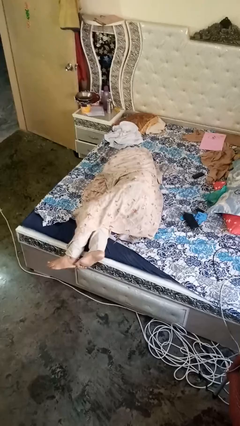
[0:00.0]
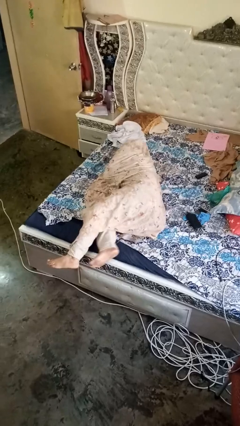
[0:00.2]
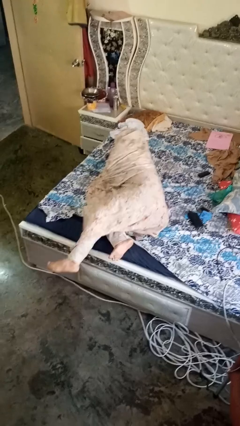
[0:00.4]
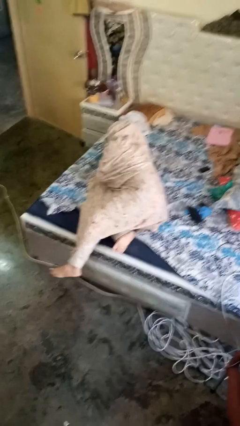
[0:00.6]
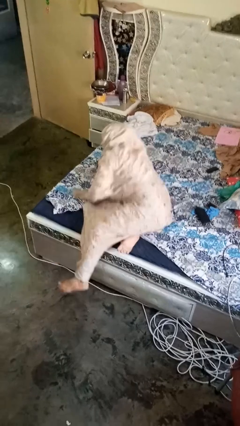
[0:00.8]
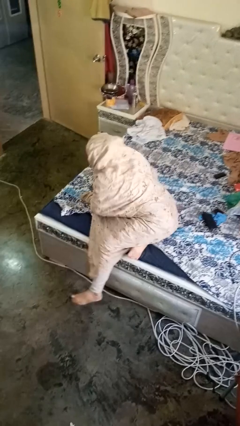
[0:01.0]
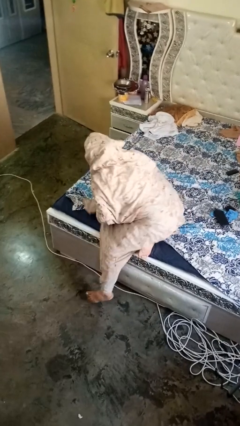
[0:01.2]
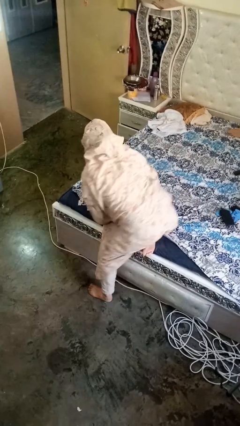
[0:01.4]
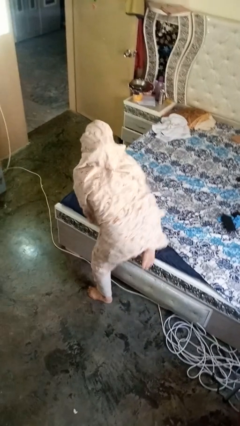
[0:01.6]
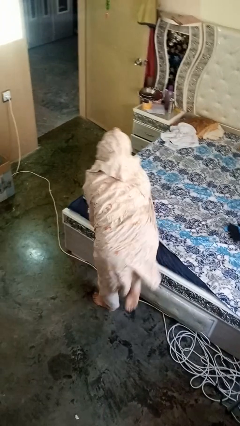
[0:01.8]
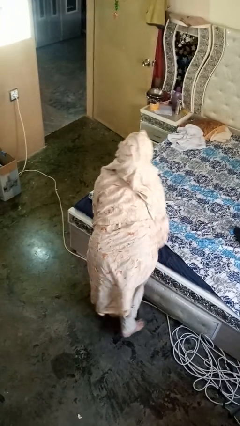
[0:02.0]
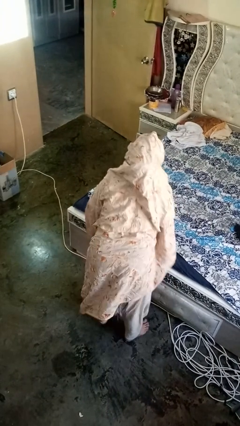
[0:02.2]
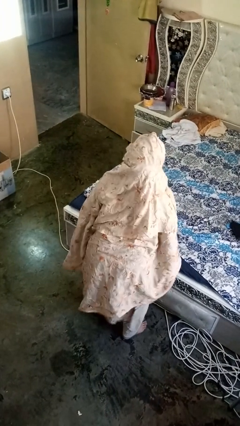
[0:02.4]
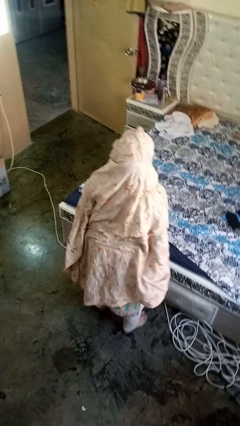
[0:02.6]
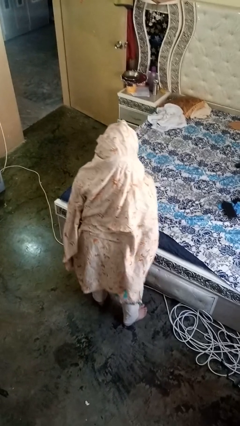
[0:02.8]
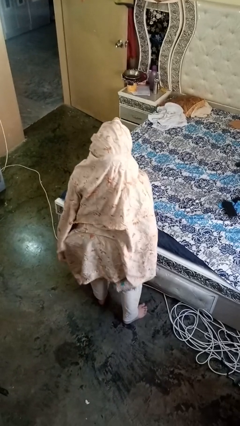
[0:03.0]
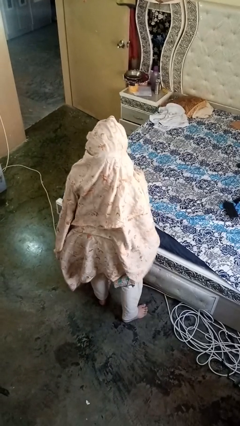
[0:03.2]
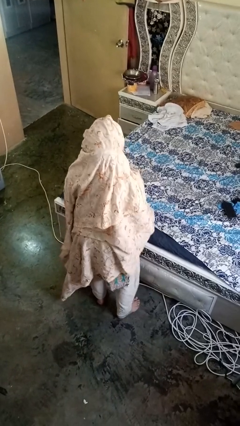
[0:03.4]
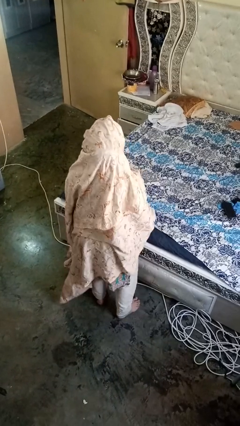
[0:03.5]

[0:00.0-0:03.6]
person stands up

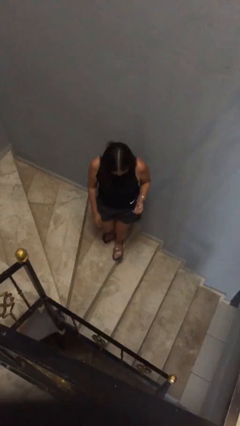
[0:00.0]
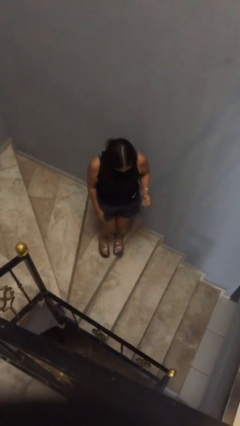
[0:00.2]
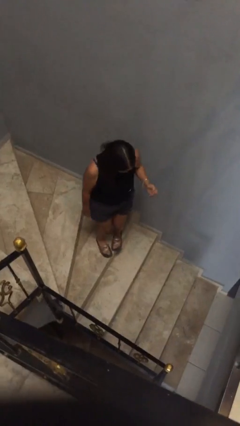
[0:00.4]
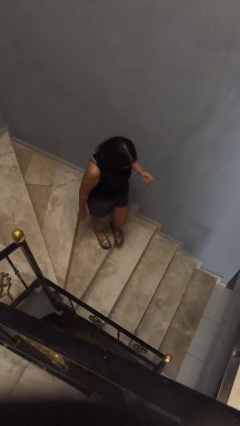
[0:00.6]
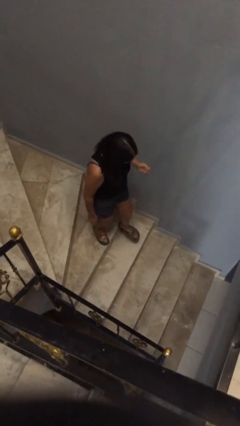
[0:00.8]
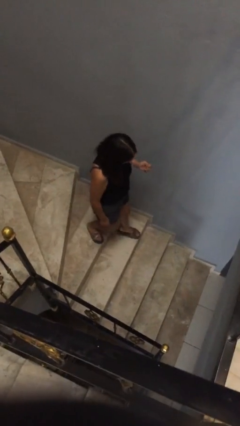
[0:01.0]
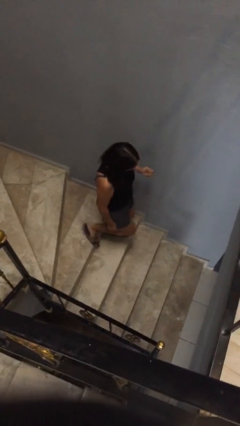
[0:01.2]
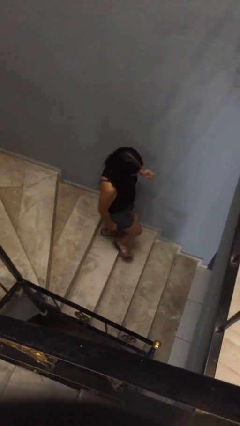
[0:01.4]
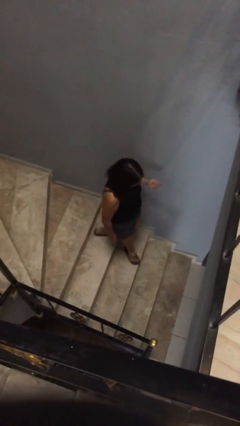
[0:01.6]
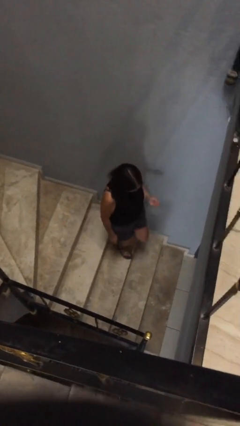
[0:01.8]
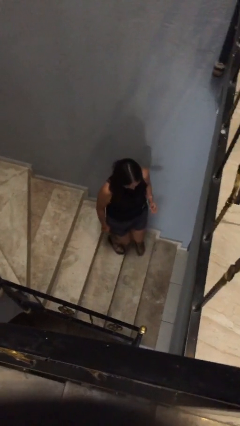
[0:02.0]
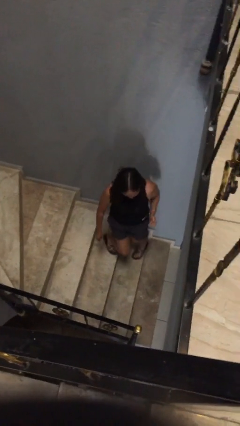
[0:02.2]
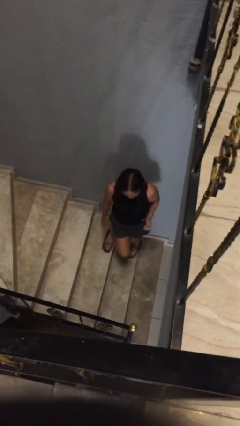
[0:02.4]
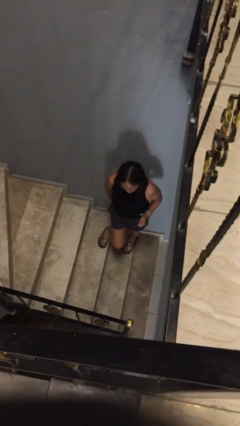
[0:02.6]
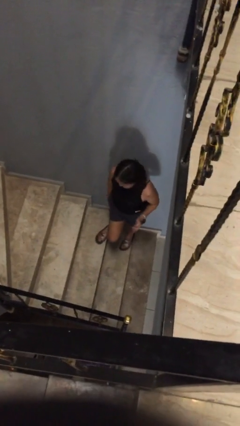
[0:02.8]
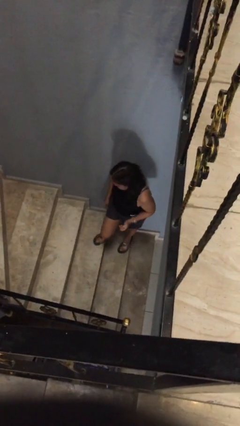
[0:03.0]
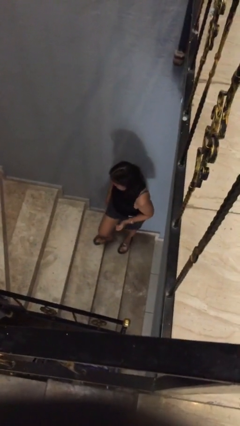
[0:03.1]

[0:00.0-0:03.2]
person climbs down stairs

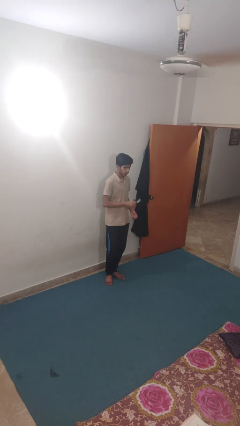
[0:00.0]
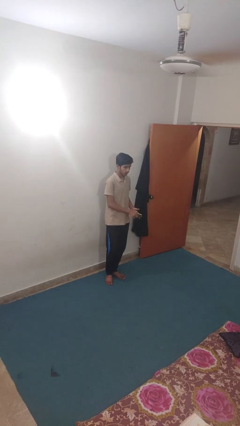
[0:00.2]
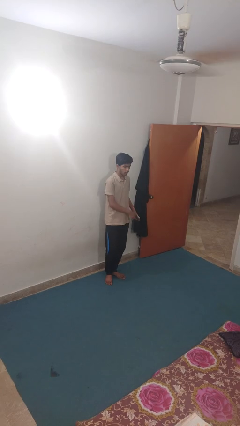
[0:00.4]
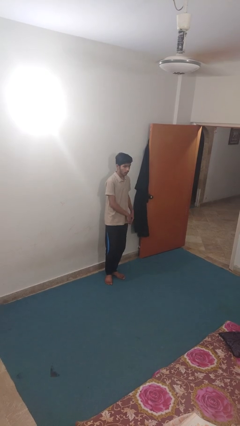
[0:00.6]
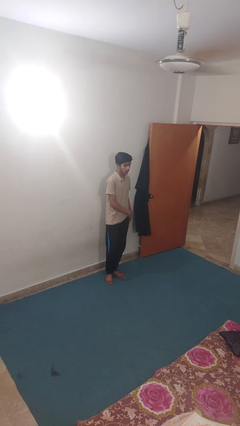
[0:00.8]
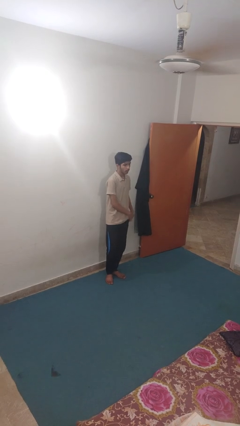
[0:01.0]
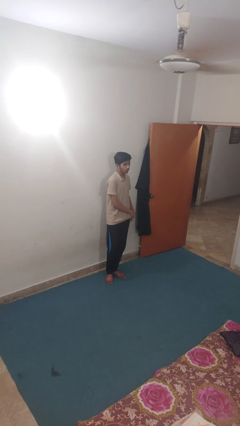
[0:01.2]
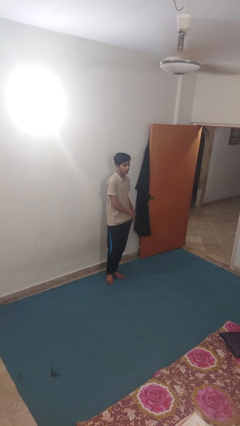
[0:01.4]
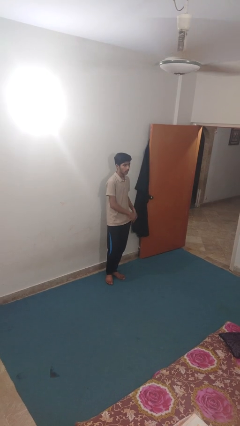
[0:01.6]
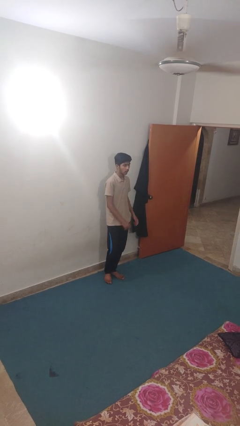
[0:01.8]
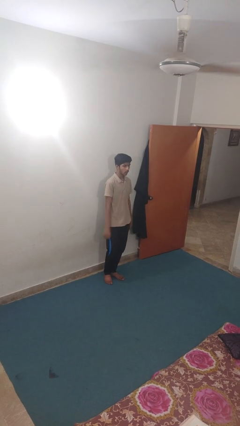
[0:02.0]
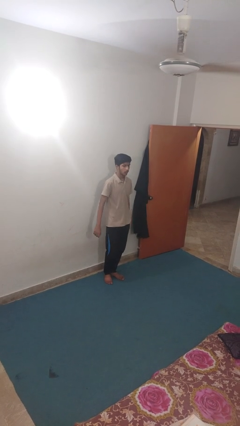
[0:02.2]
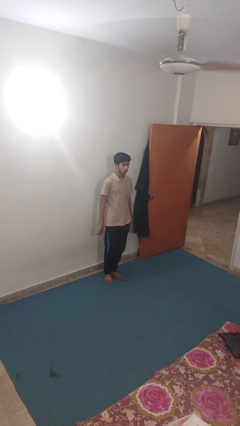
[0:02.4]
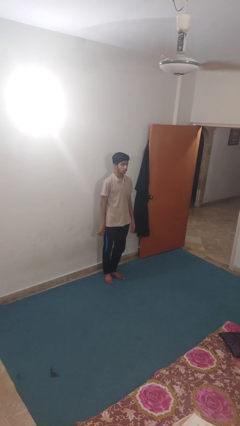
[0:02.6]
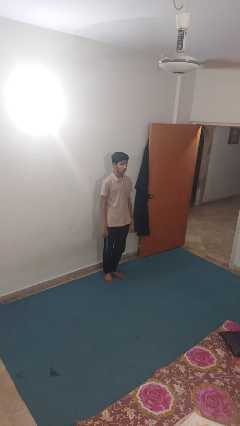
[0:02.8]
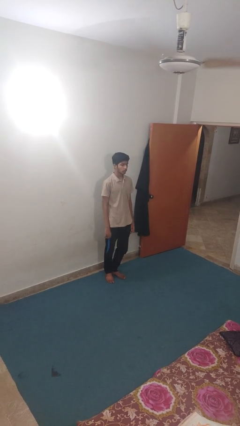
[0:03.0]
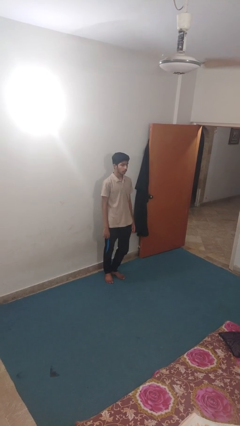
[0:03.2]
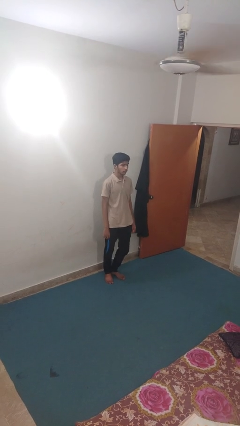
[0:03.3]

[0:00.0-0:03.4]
person puts phone into pocket

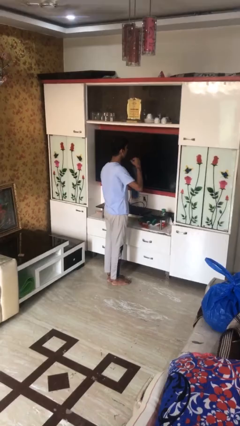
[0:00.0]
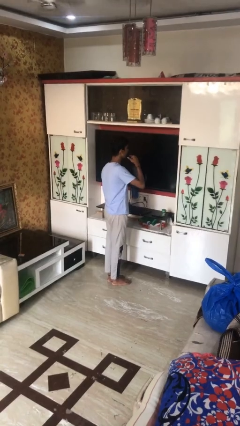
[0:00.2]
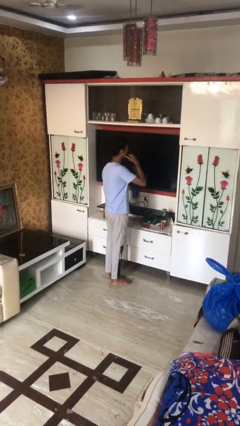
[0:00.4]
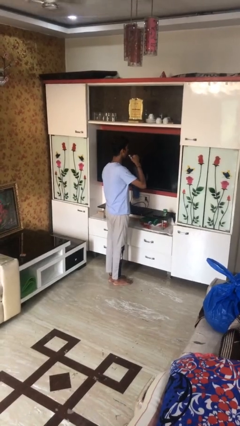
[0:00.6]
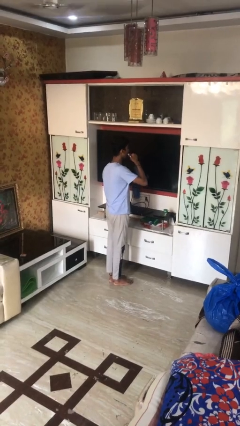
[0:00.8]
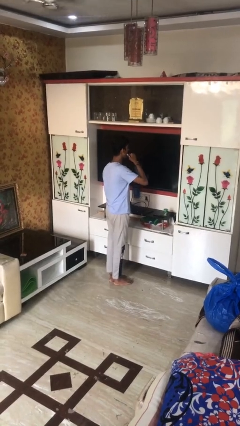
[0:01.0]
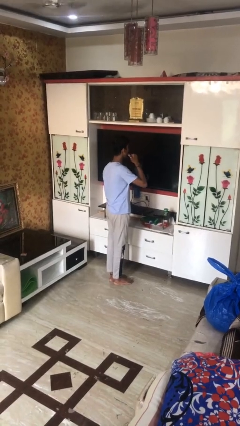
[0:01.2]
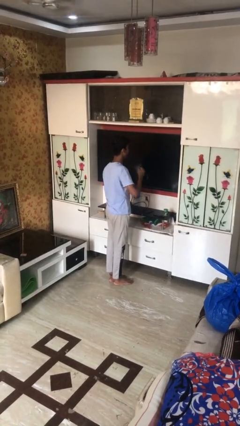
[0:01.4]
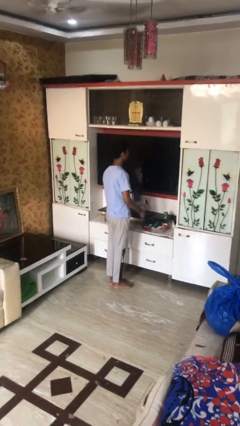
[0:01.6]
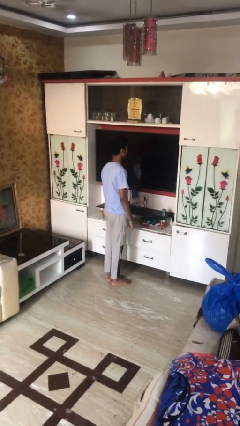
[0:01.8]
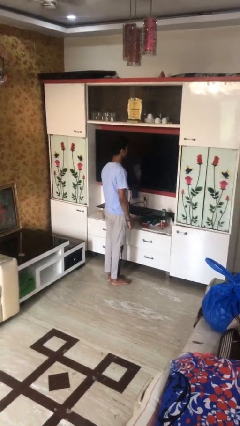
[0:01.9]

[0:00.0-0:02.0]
person licks fingers

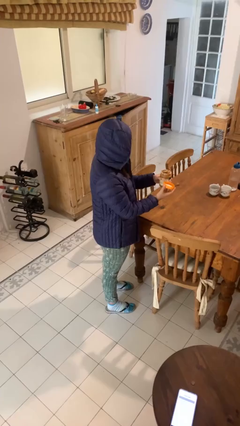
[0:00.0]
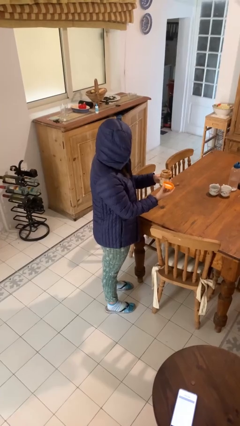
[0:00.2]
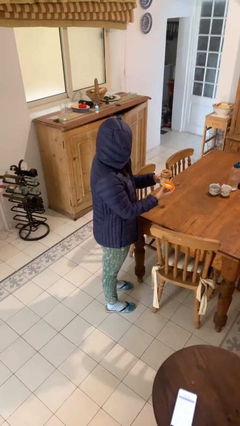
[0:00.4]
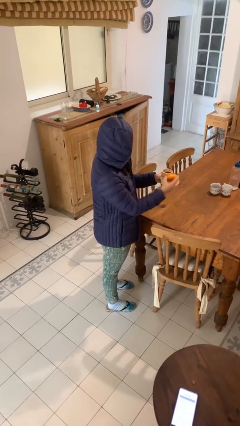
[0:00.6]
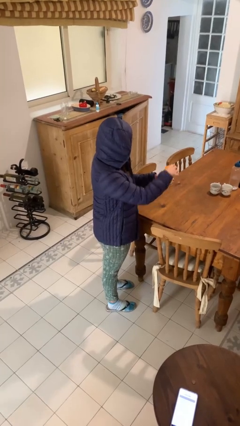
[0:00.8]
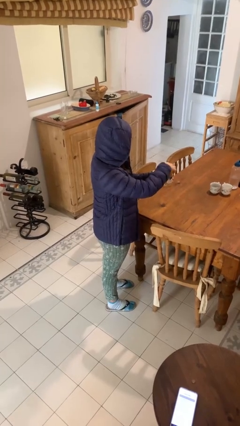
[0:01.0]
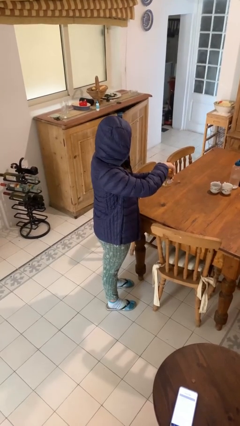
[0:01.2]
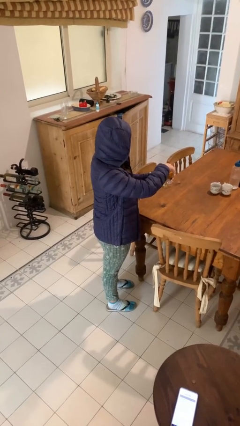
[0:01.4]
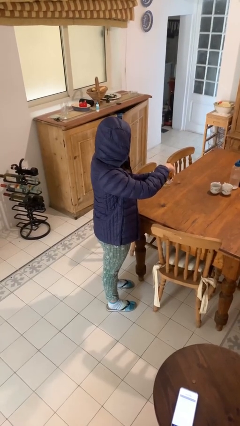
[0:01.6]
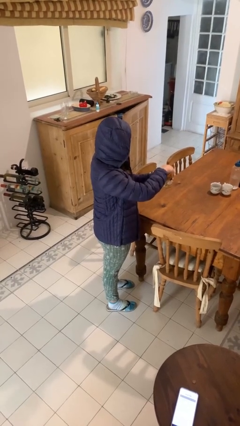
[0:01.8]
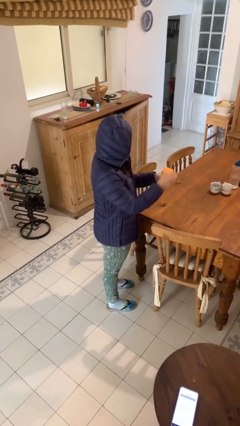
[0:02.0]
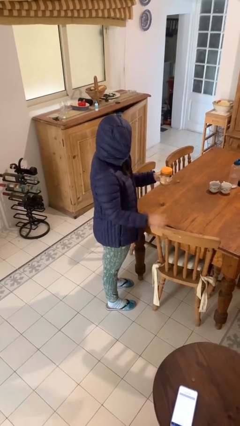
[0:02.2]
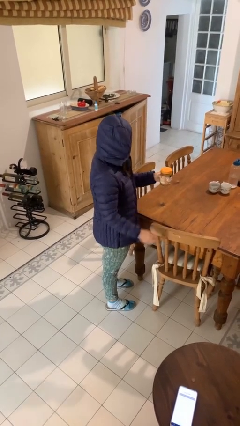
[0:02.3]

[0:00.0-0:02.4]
person closes jar

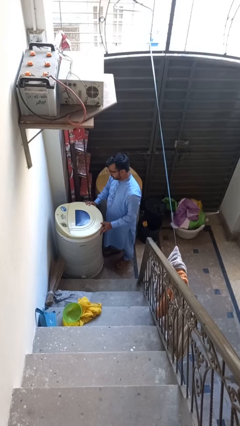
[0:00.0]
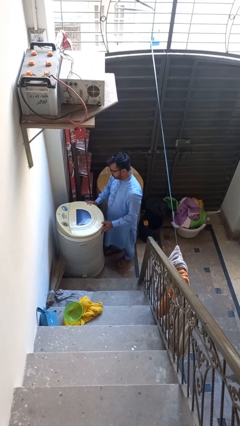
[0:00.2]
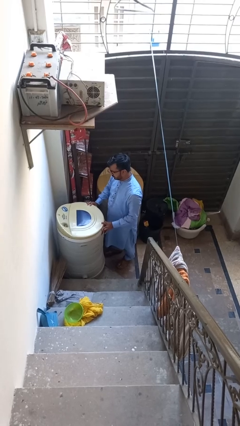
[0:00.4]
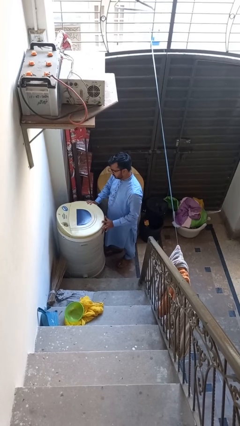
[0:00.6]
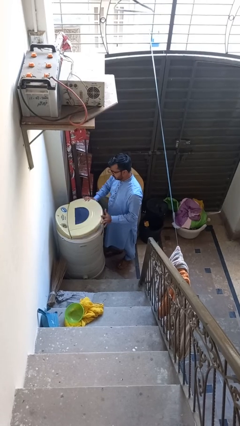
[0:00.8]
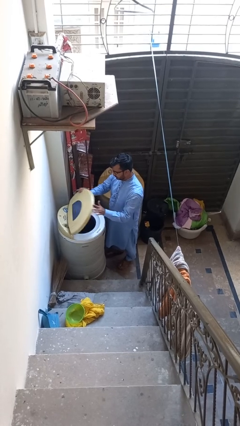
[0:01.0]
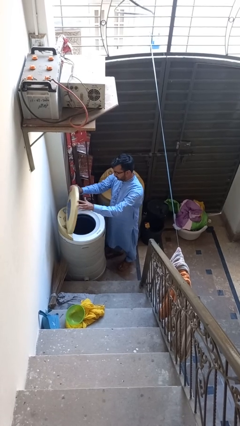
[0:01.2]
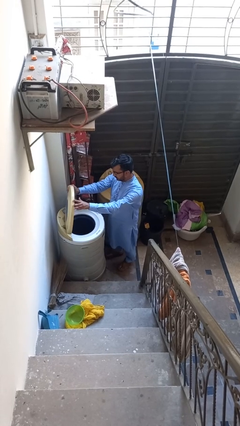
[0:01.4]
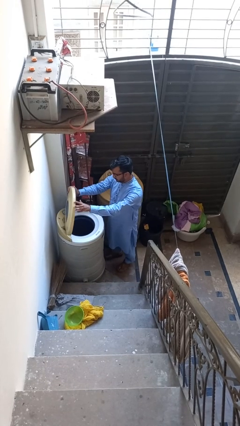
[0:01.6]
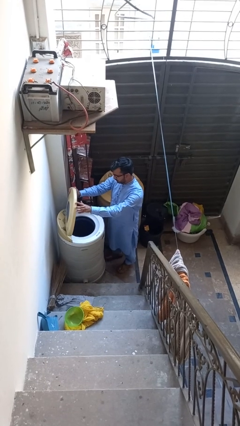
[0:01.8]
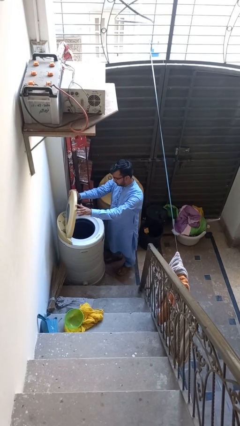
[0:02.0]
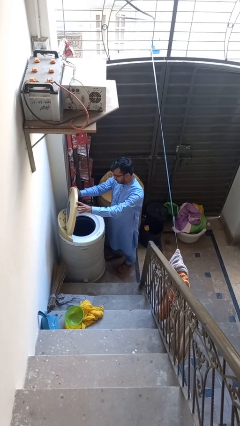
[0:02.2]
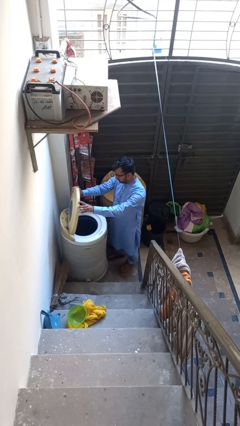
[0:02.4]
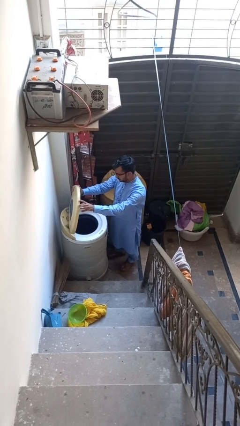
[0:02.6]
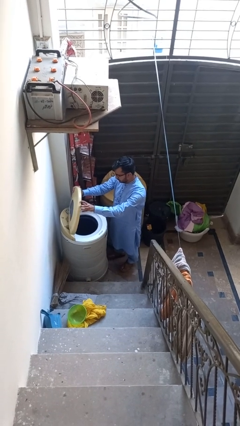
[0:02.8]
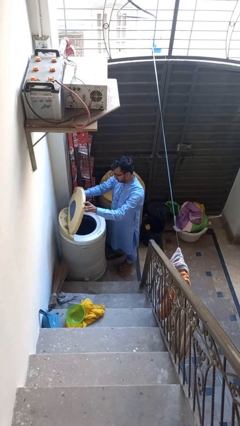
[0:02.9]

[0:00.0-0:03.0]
person opens clothes washer
